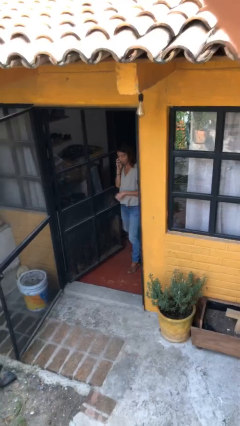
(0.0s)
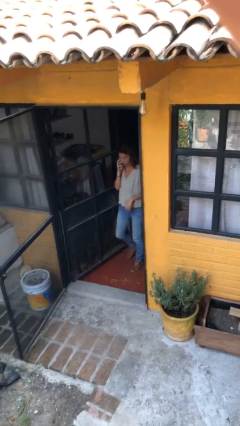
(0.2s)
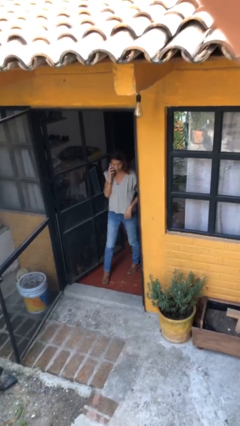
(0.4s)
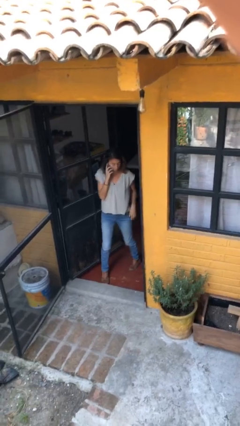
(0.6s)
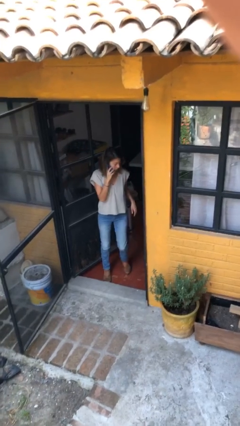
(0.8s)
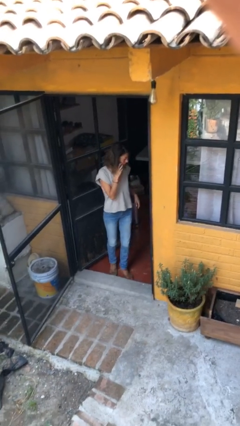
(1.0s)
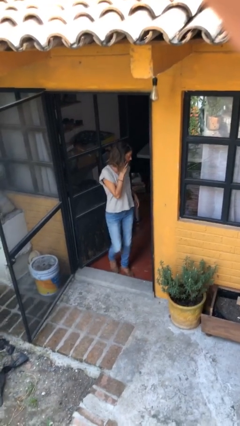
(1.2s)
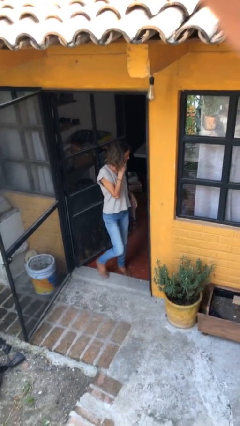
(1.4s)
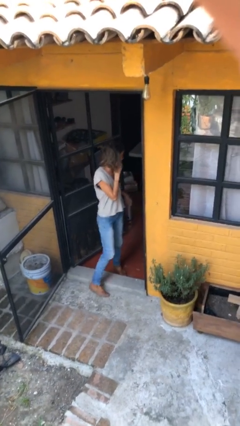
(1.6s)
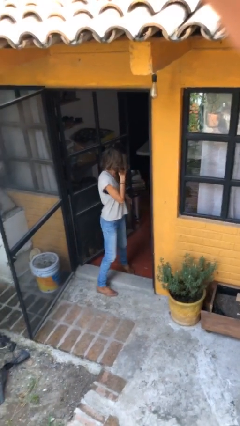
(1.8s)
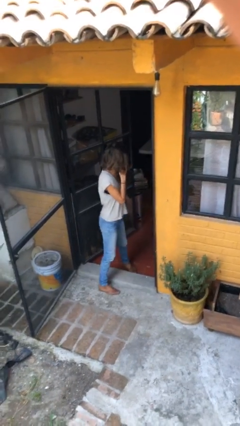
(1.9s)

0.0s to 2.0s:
person enters scene through structure

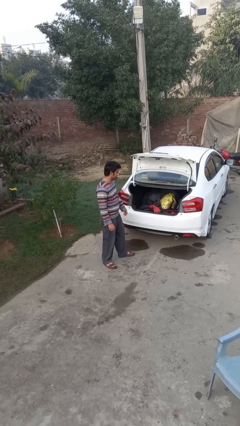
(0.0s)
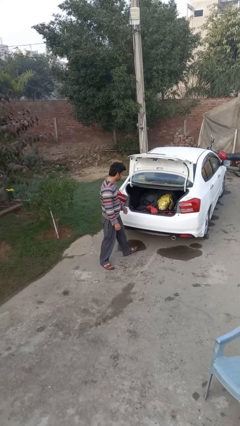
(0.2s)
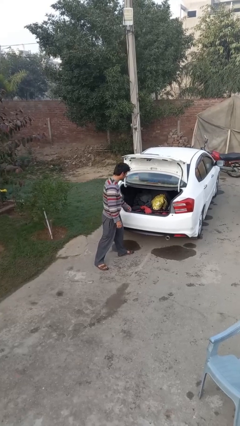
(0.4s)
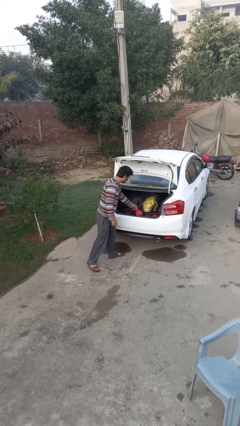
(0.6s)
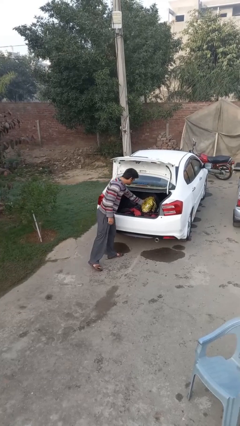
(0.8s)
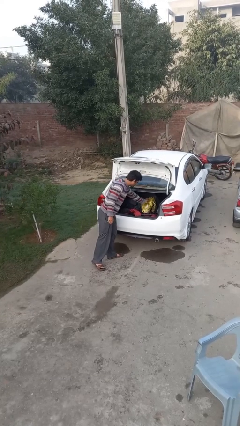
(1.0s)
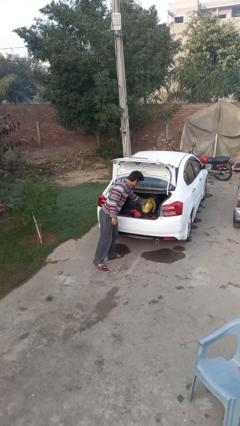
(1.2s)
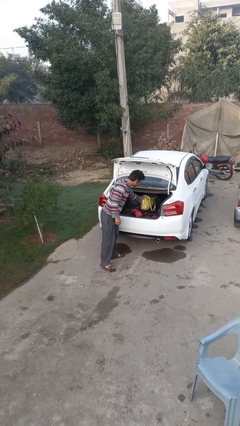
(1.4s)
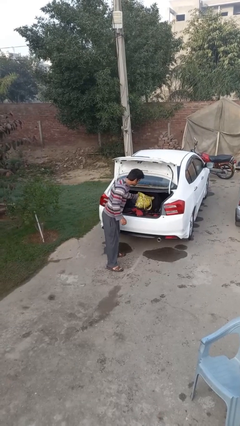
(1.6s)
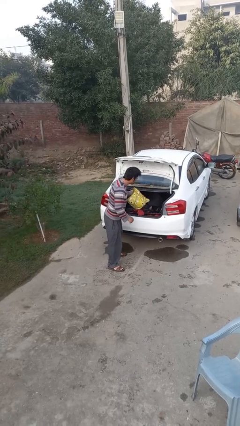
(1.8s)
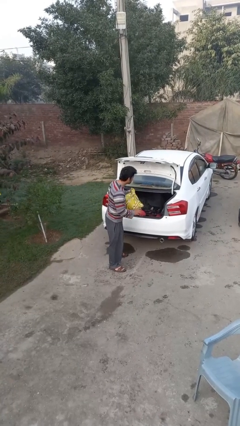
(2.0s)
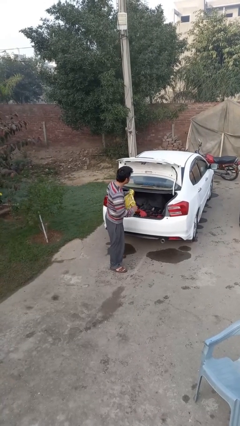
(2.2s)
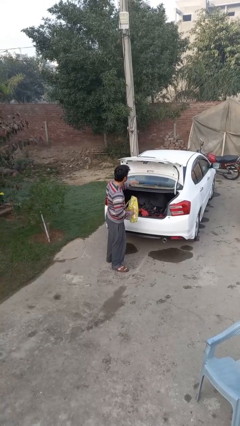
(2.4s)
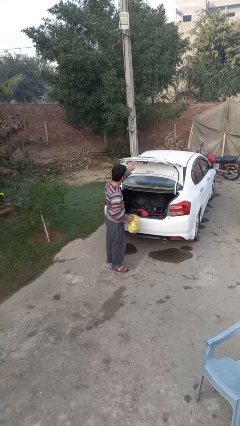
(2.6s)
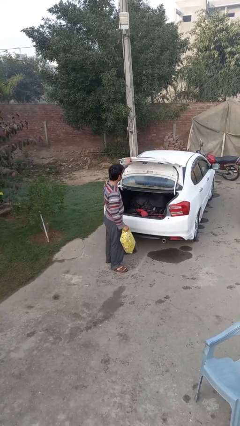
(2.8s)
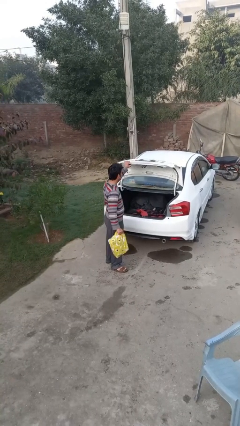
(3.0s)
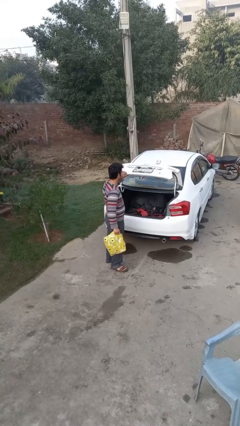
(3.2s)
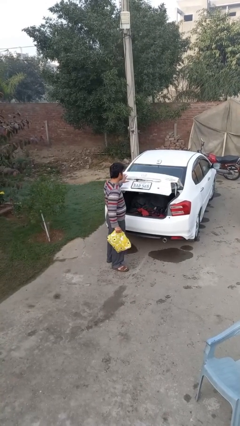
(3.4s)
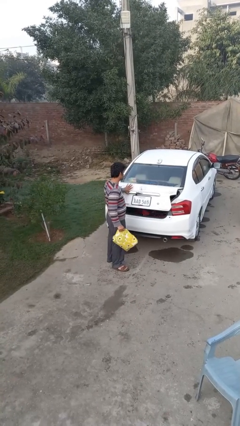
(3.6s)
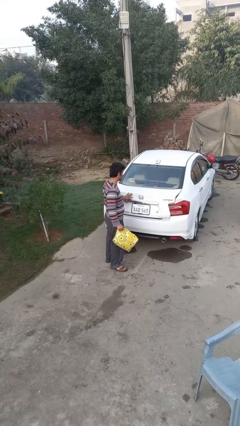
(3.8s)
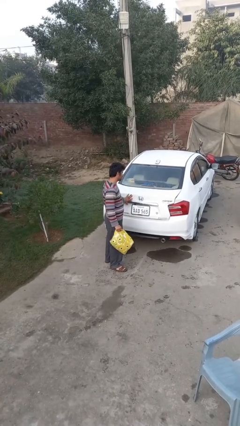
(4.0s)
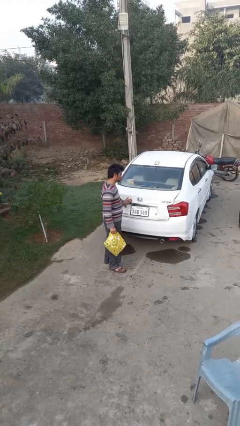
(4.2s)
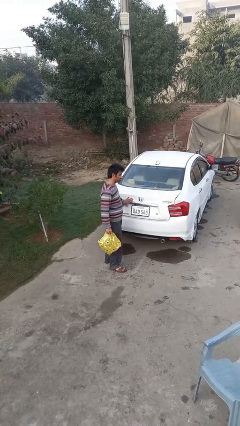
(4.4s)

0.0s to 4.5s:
person unloads car

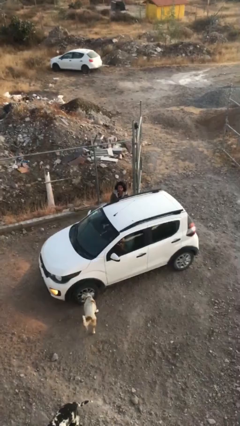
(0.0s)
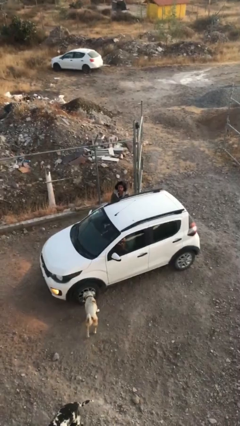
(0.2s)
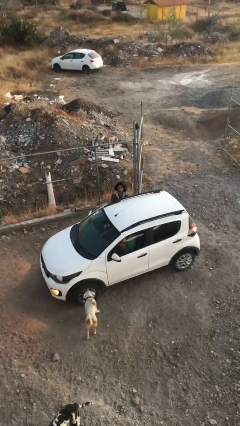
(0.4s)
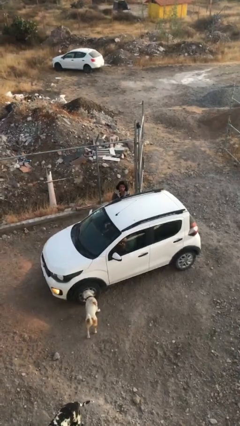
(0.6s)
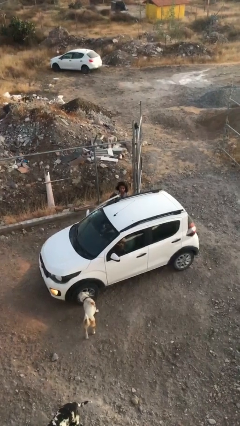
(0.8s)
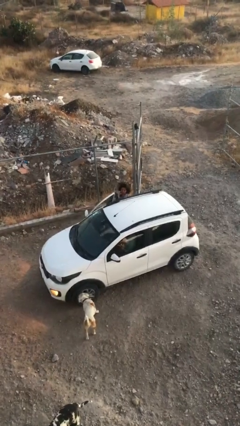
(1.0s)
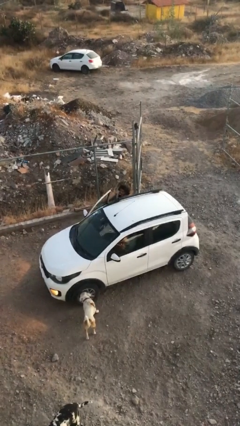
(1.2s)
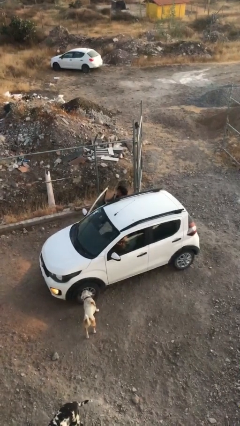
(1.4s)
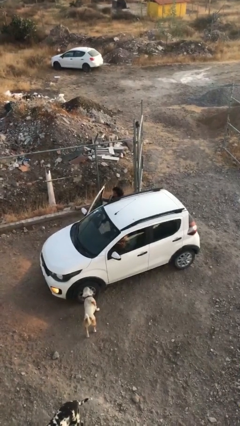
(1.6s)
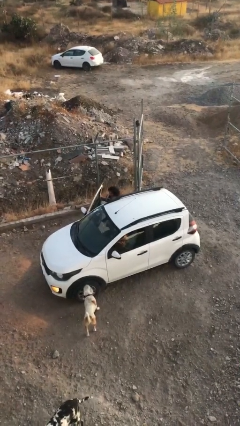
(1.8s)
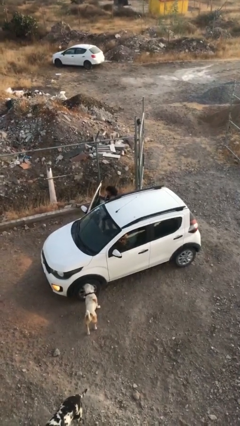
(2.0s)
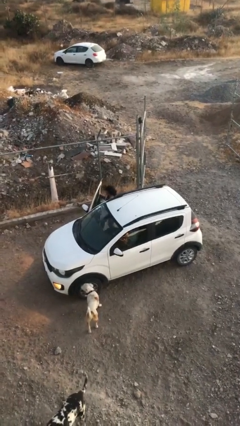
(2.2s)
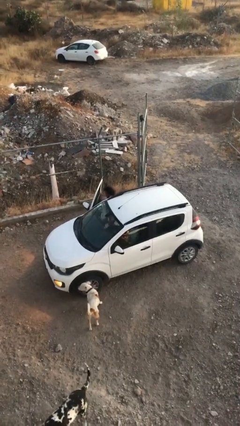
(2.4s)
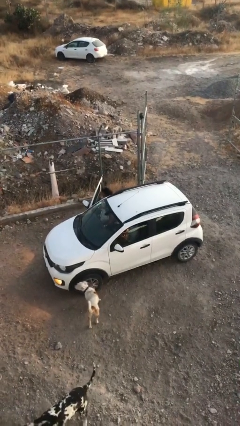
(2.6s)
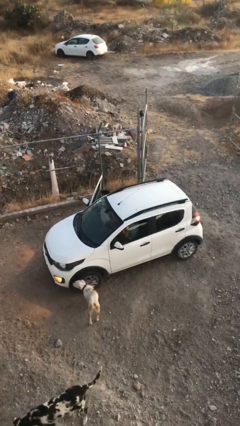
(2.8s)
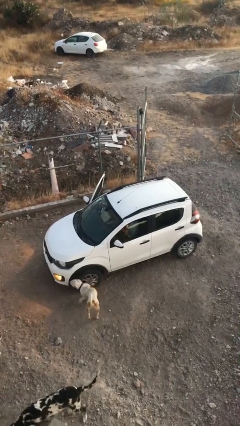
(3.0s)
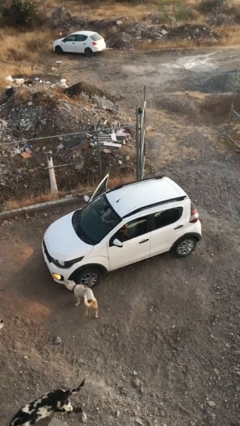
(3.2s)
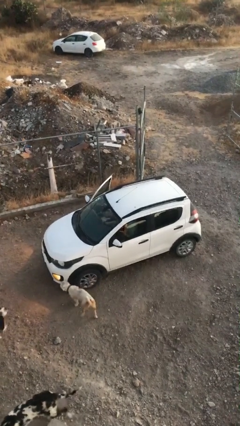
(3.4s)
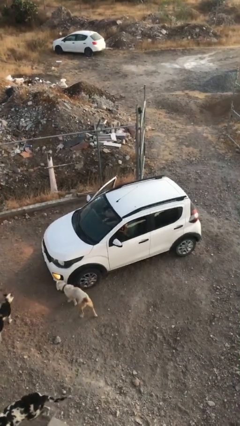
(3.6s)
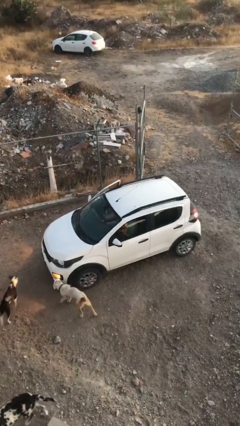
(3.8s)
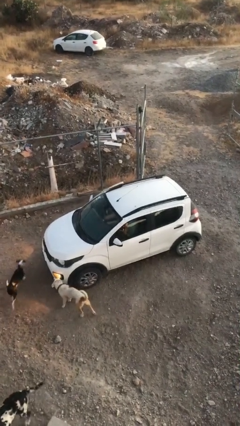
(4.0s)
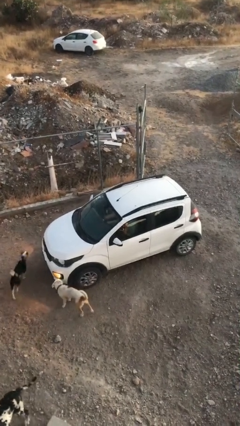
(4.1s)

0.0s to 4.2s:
car picks up person

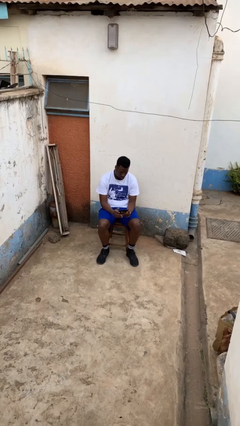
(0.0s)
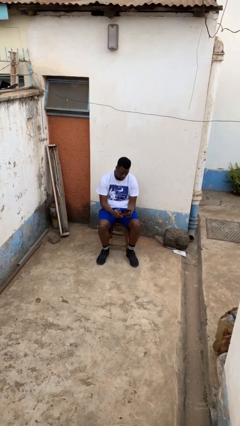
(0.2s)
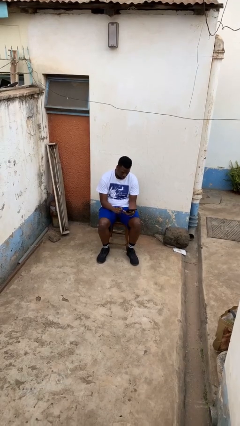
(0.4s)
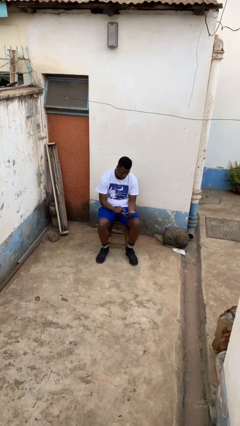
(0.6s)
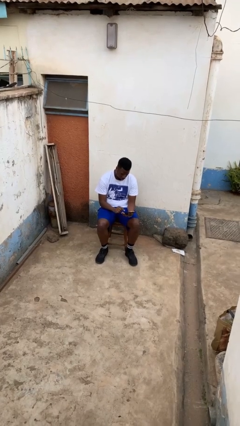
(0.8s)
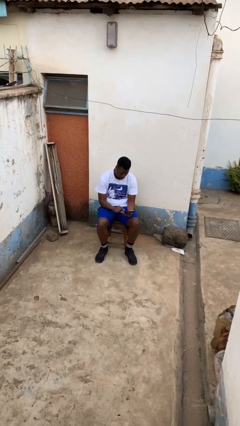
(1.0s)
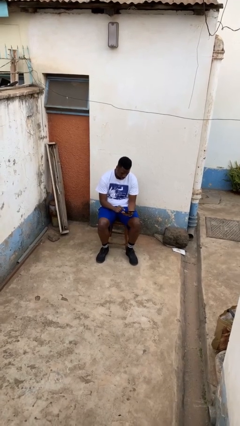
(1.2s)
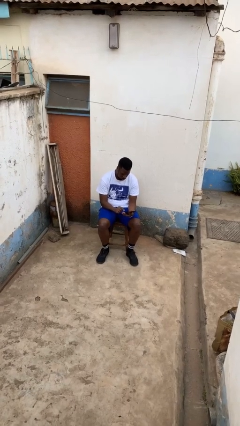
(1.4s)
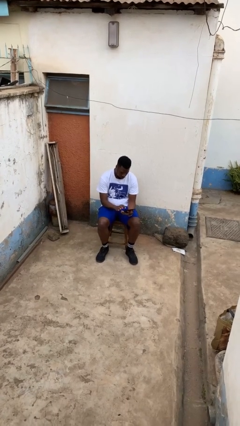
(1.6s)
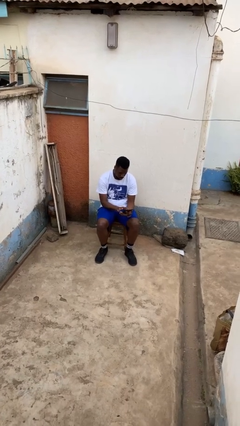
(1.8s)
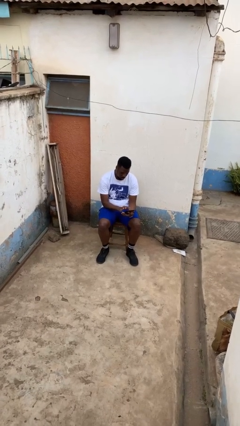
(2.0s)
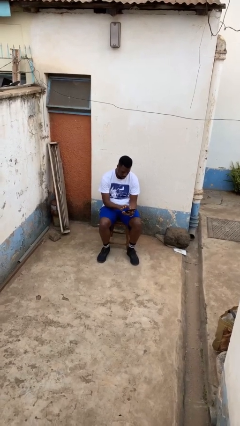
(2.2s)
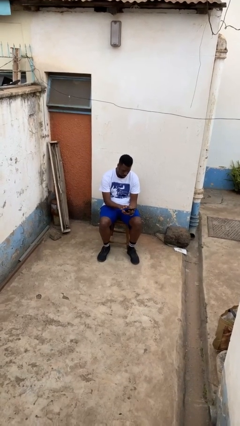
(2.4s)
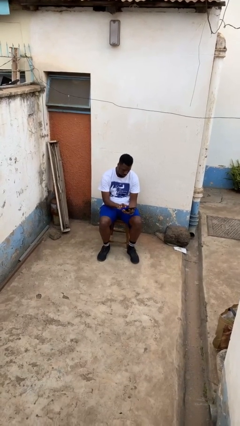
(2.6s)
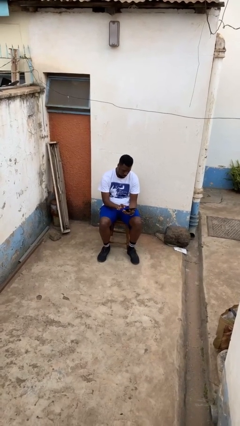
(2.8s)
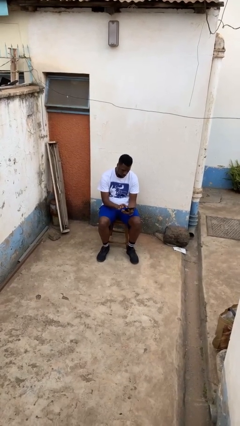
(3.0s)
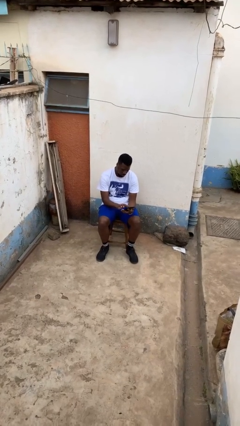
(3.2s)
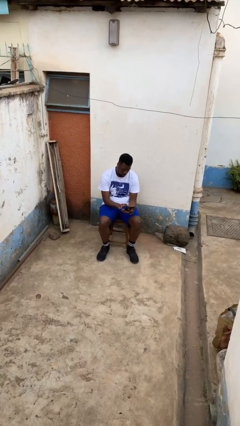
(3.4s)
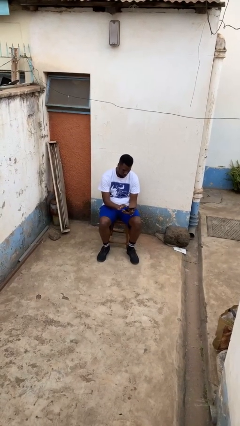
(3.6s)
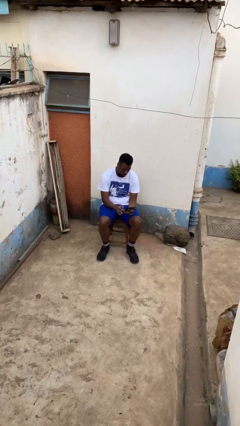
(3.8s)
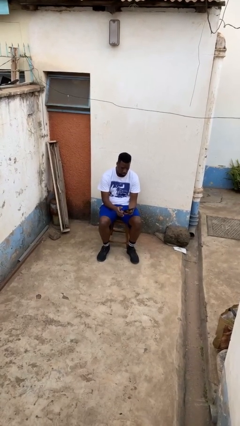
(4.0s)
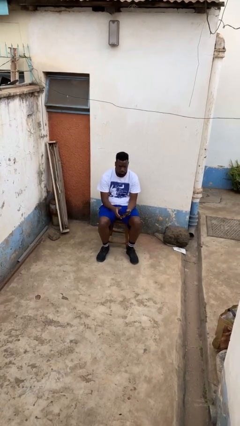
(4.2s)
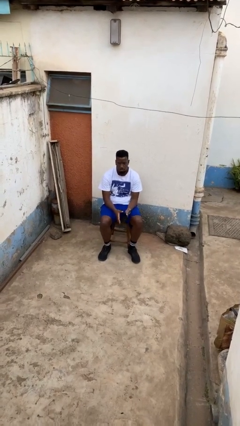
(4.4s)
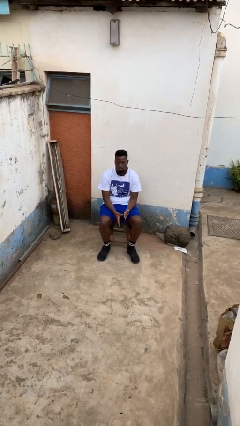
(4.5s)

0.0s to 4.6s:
person interacts with tablet

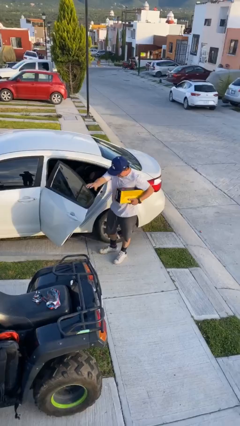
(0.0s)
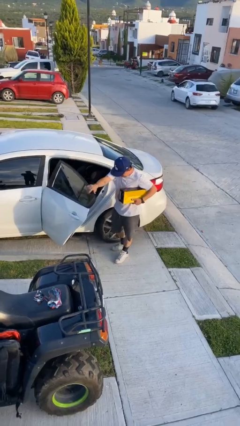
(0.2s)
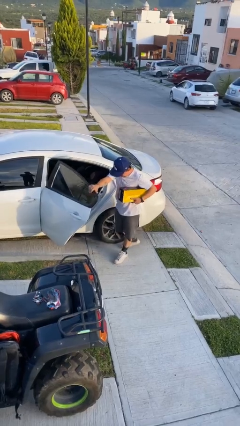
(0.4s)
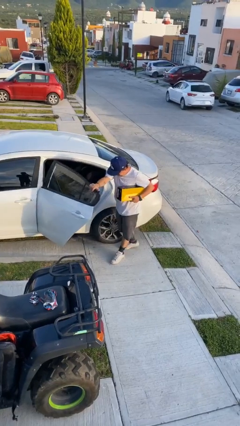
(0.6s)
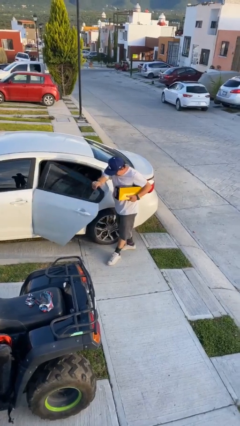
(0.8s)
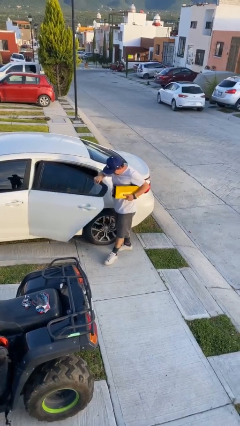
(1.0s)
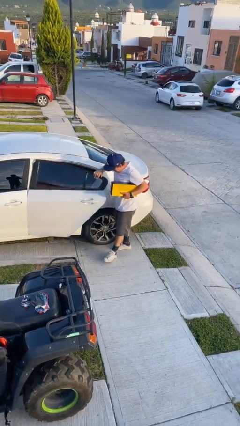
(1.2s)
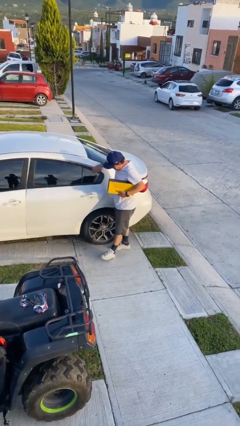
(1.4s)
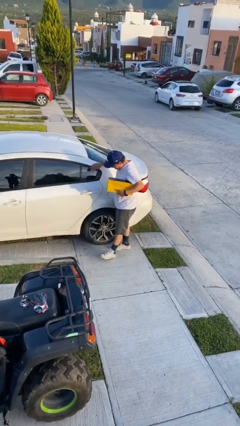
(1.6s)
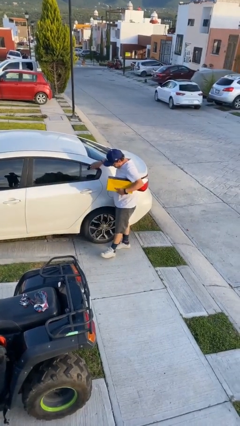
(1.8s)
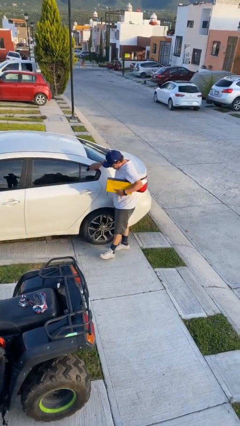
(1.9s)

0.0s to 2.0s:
person closes car door
